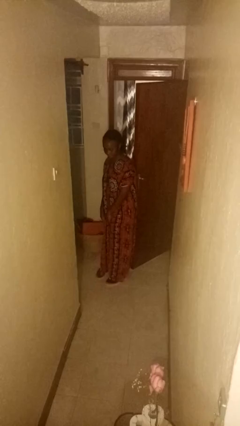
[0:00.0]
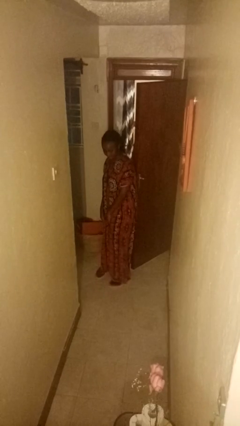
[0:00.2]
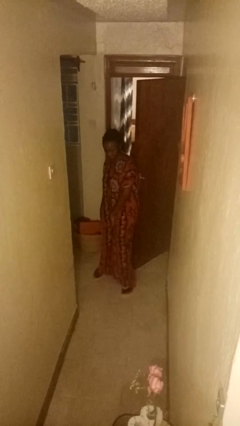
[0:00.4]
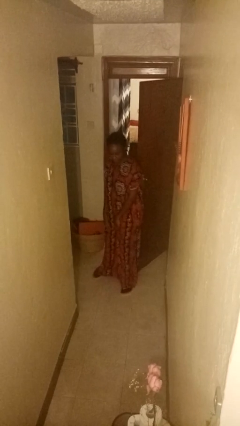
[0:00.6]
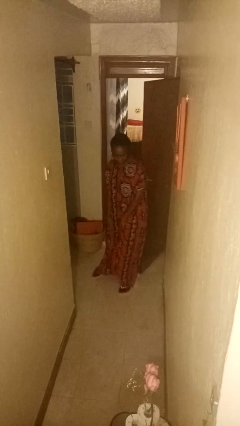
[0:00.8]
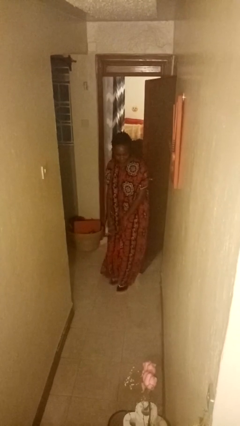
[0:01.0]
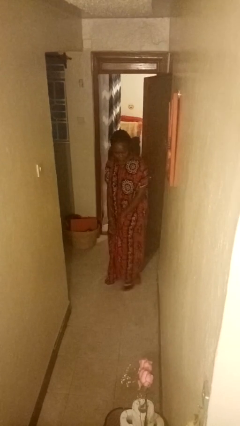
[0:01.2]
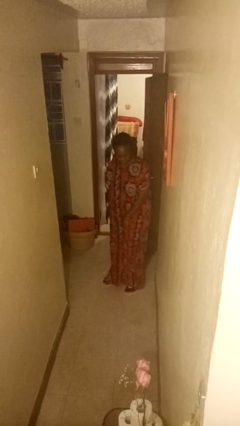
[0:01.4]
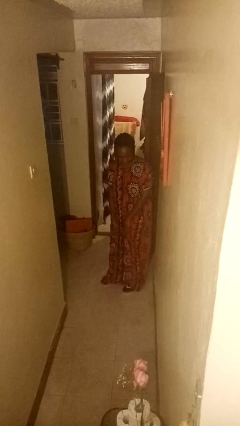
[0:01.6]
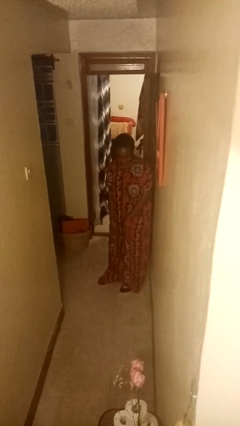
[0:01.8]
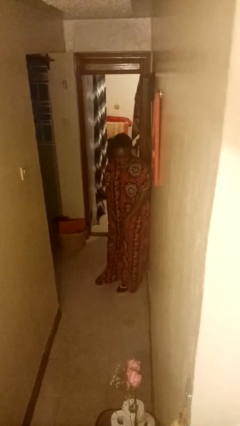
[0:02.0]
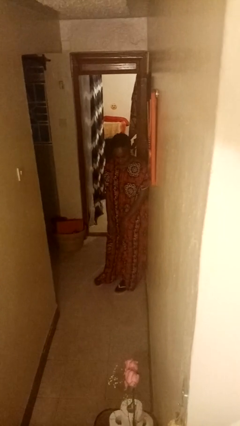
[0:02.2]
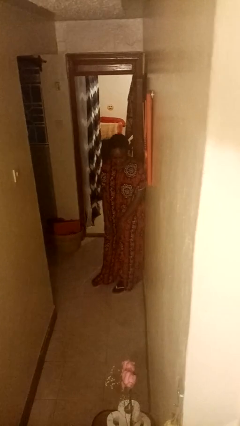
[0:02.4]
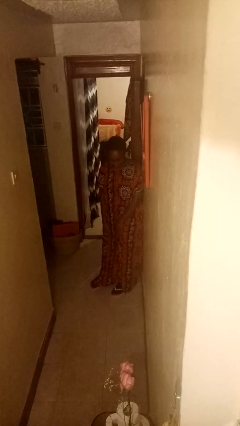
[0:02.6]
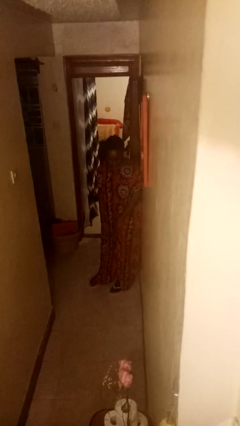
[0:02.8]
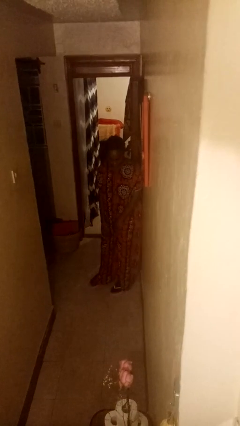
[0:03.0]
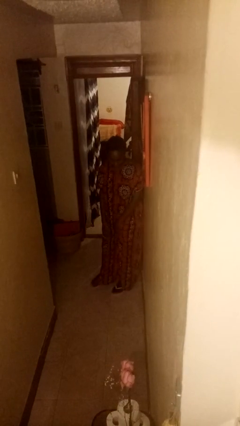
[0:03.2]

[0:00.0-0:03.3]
person closes door with hip

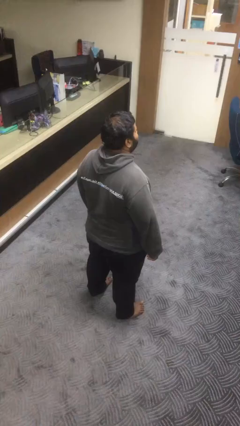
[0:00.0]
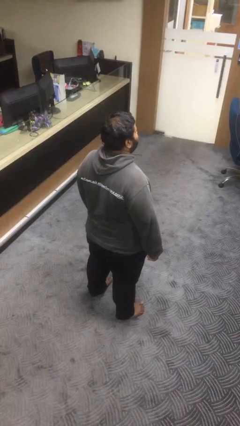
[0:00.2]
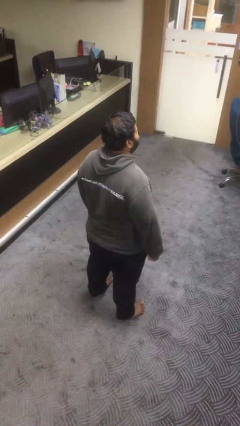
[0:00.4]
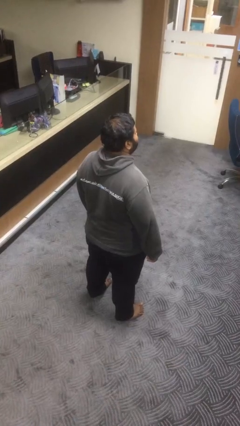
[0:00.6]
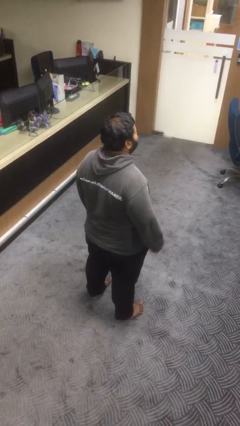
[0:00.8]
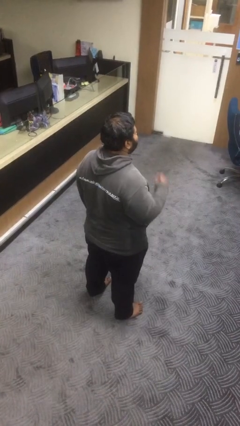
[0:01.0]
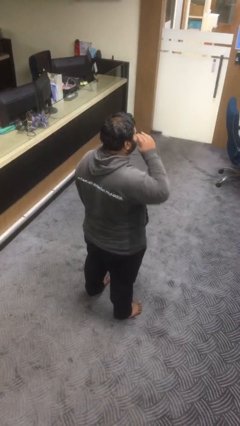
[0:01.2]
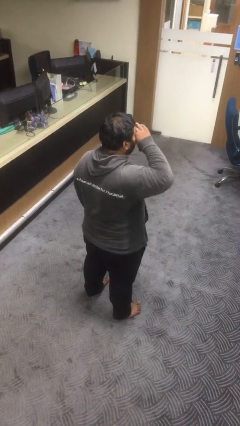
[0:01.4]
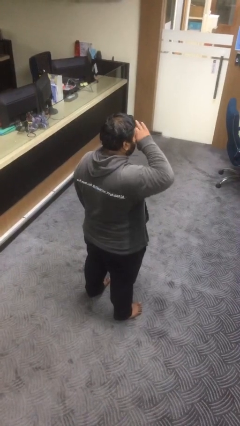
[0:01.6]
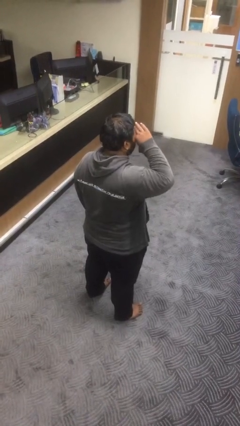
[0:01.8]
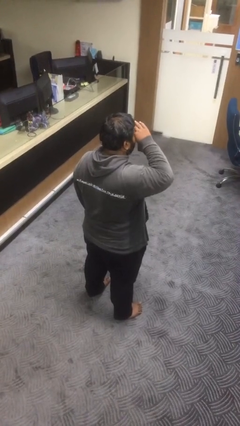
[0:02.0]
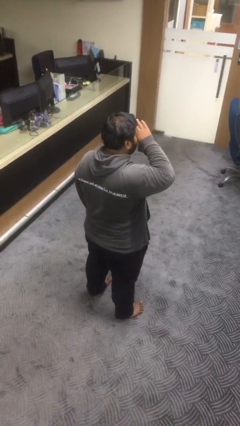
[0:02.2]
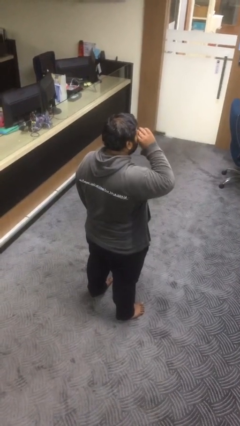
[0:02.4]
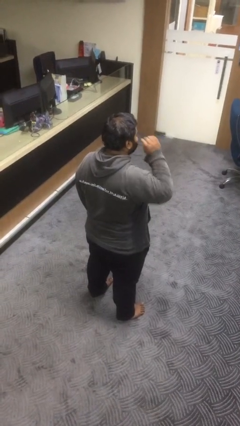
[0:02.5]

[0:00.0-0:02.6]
person rubs eyes

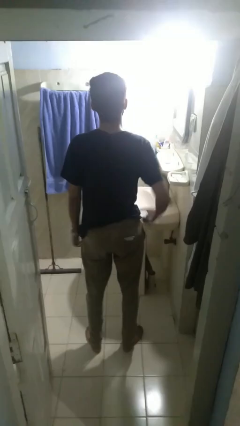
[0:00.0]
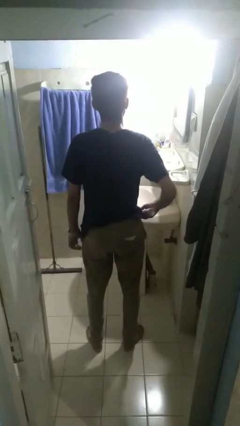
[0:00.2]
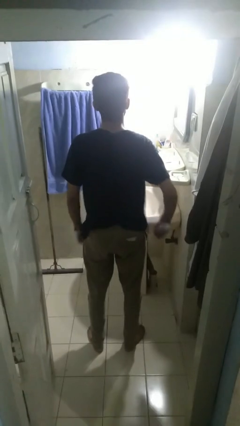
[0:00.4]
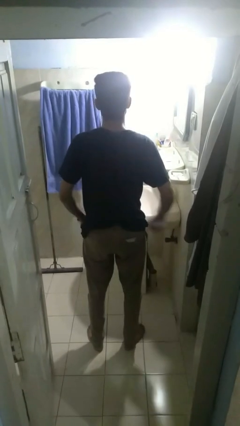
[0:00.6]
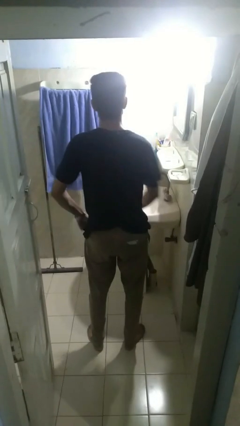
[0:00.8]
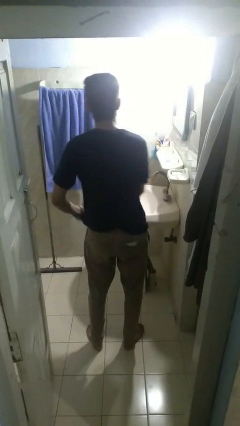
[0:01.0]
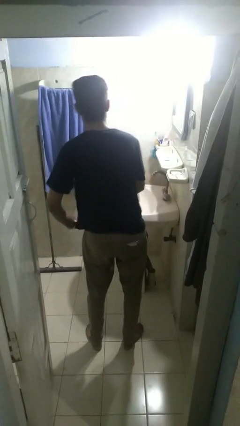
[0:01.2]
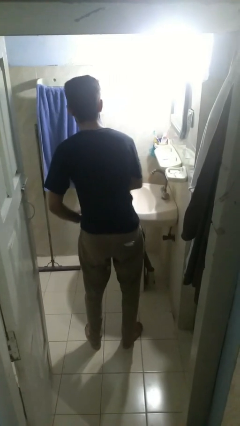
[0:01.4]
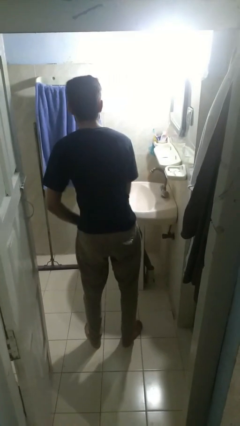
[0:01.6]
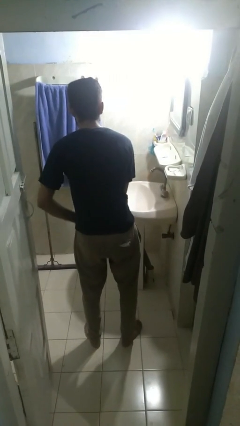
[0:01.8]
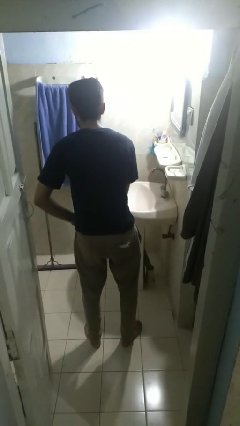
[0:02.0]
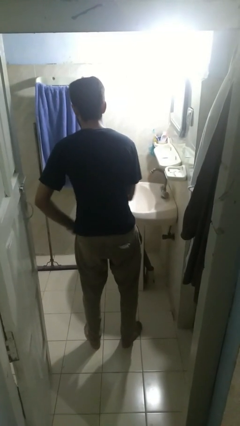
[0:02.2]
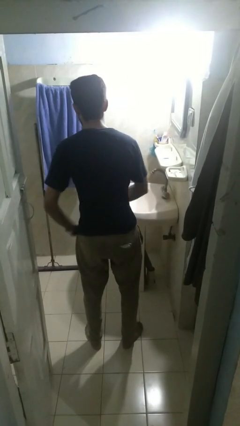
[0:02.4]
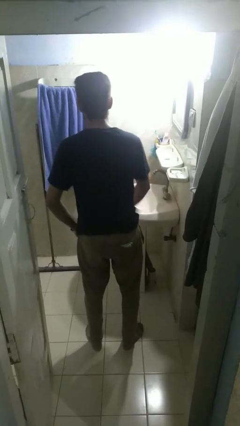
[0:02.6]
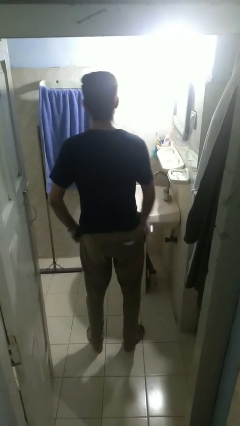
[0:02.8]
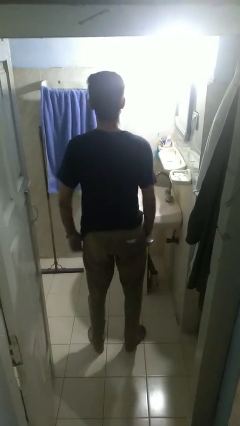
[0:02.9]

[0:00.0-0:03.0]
person applies deodorant

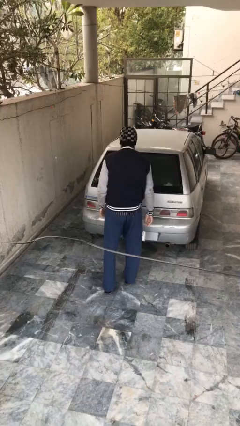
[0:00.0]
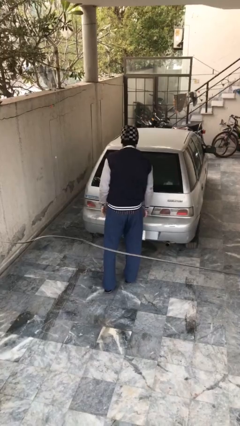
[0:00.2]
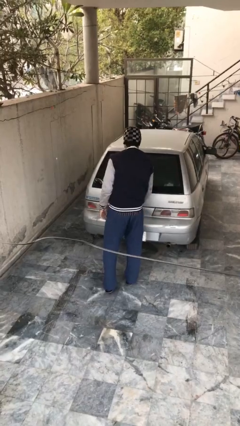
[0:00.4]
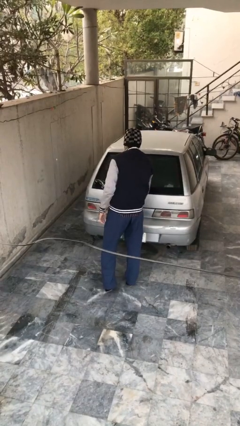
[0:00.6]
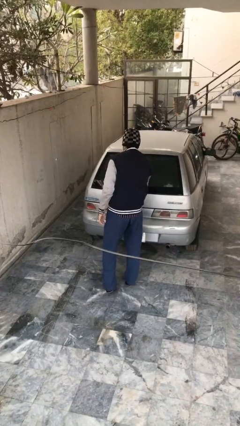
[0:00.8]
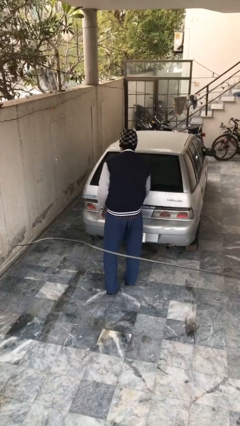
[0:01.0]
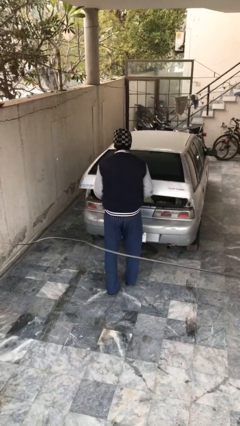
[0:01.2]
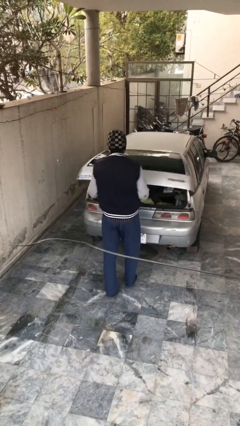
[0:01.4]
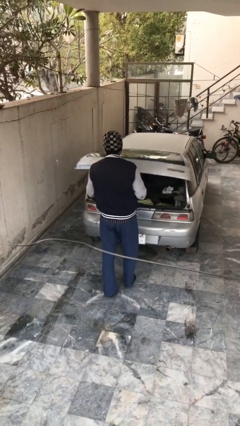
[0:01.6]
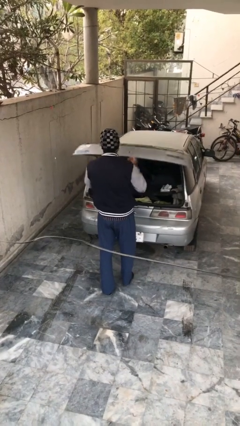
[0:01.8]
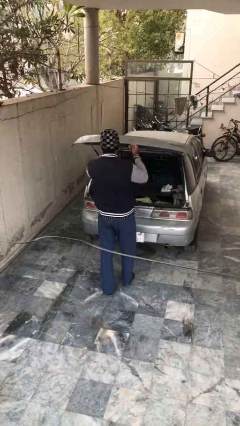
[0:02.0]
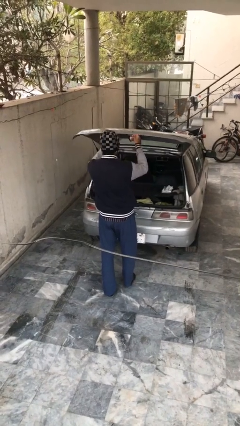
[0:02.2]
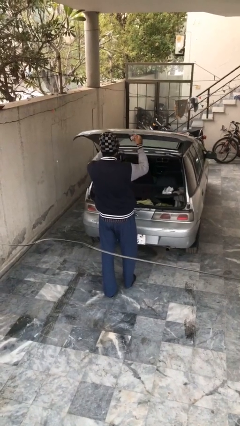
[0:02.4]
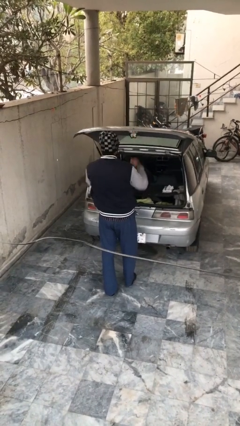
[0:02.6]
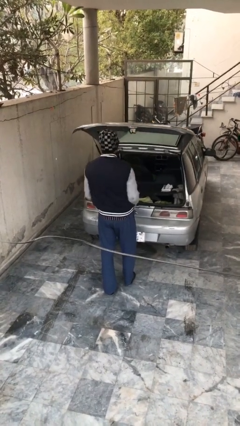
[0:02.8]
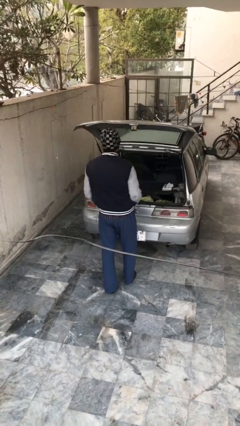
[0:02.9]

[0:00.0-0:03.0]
person opens car trunk

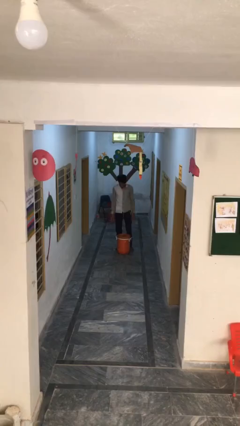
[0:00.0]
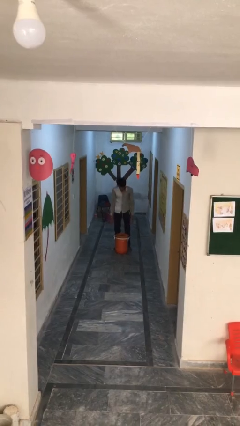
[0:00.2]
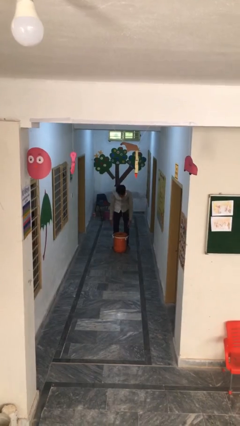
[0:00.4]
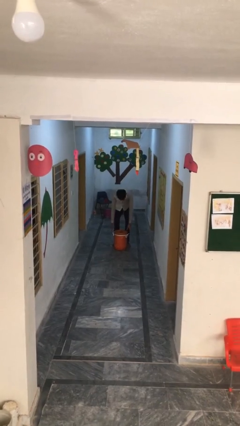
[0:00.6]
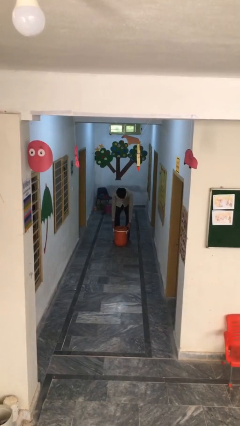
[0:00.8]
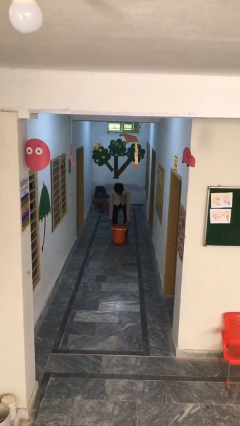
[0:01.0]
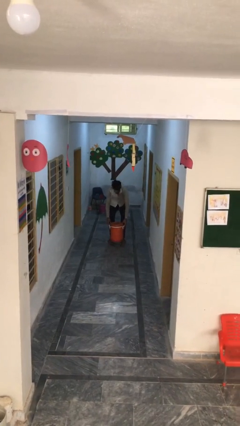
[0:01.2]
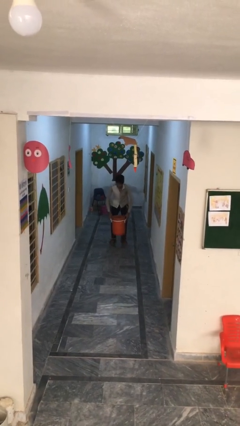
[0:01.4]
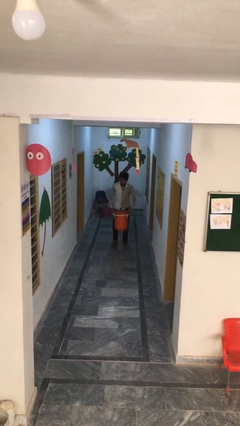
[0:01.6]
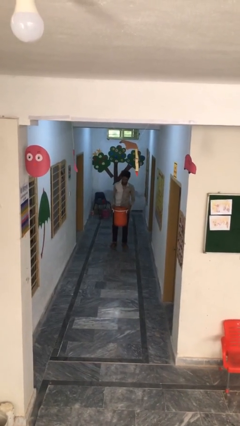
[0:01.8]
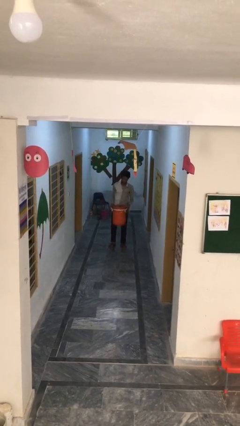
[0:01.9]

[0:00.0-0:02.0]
person picks up object from floor

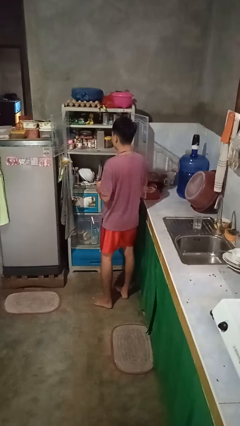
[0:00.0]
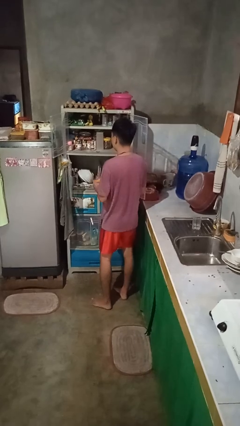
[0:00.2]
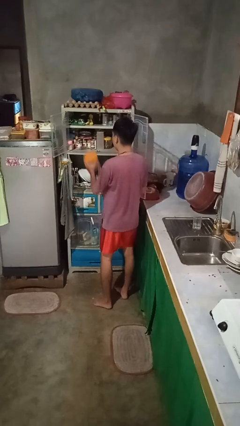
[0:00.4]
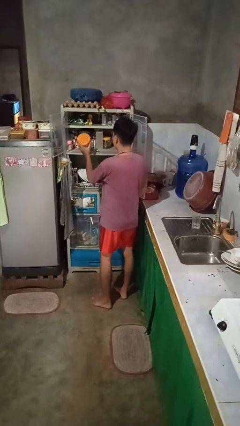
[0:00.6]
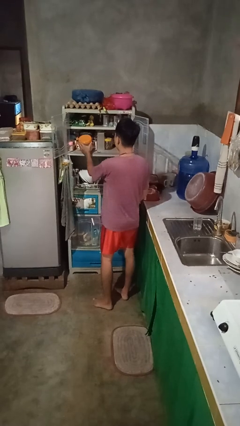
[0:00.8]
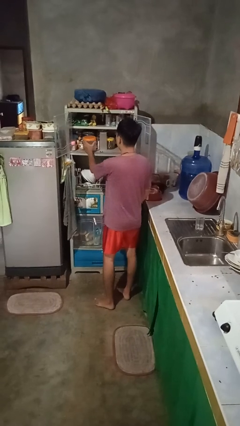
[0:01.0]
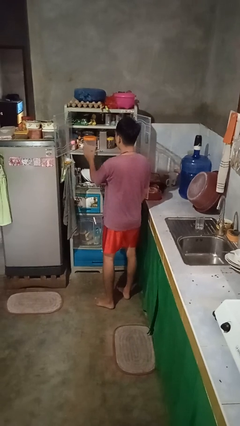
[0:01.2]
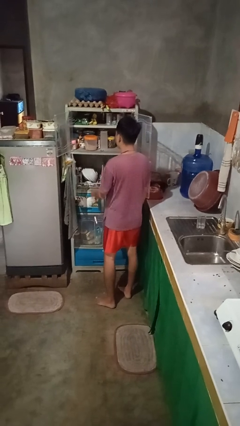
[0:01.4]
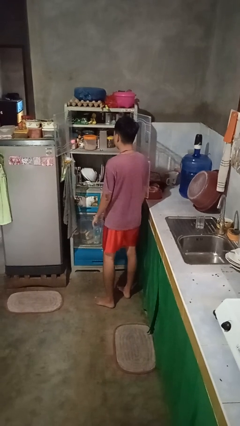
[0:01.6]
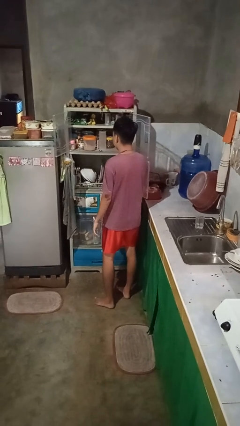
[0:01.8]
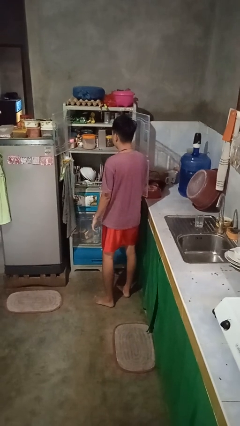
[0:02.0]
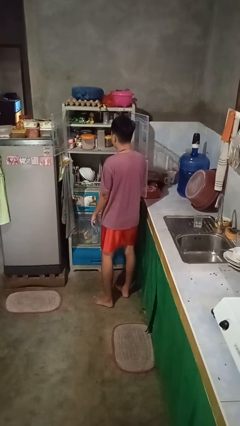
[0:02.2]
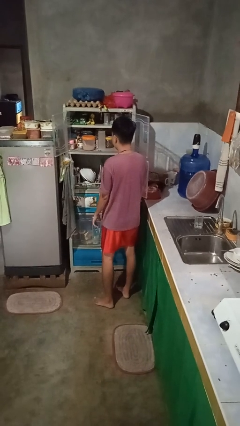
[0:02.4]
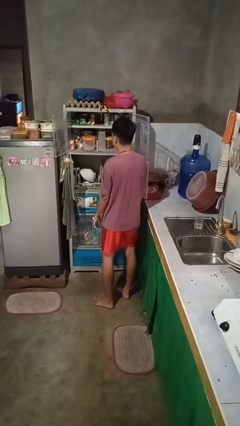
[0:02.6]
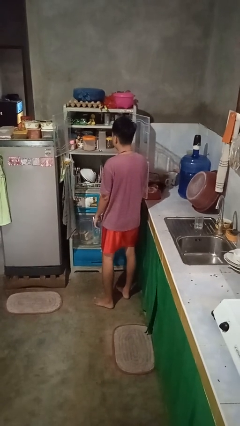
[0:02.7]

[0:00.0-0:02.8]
person puts object in cabinet

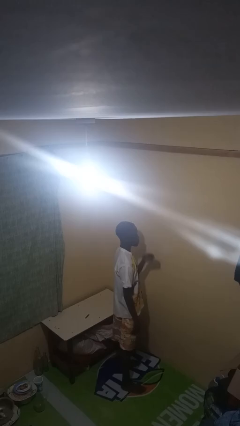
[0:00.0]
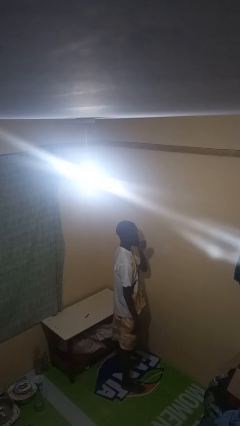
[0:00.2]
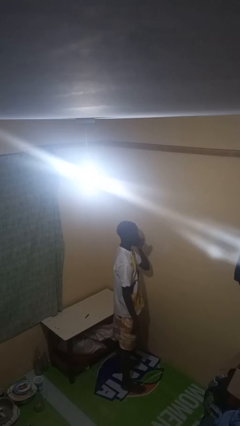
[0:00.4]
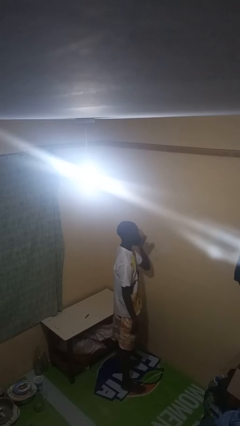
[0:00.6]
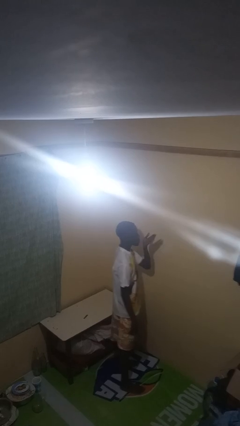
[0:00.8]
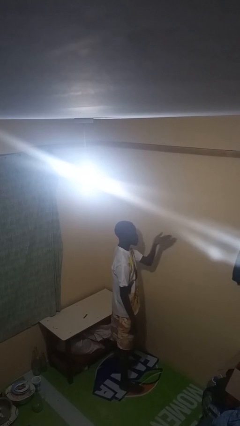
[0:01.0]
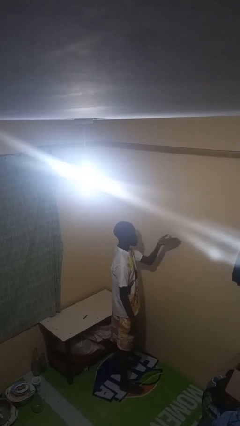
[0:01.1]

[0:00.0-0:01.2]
person gestures blow kiss
